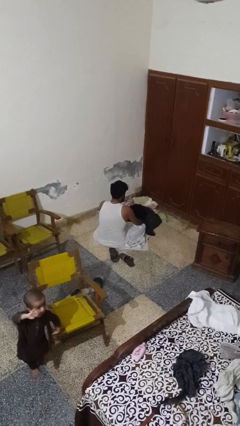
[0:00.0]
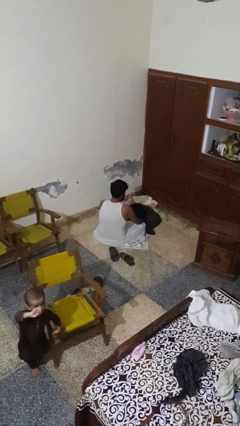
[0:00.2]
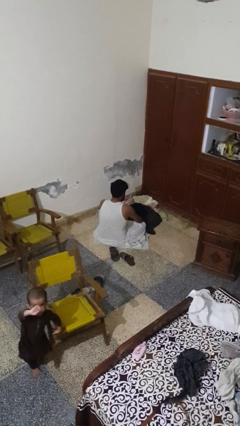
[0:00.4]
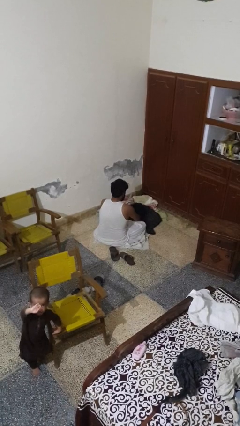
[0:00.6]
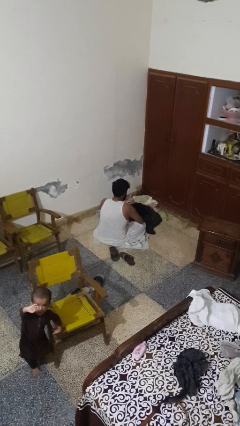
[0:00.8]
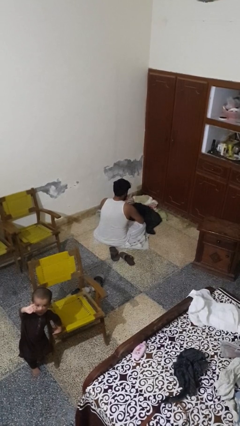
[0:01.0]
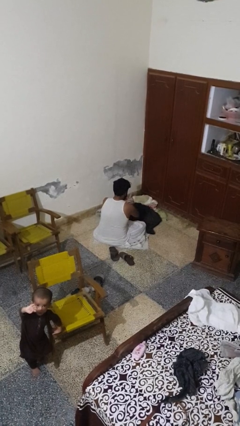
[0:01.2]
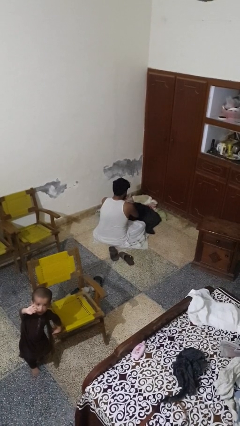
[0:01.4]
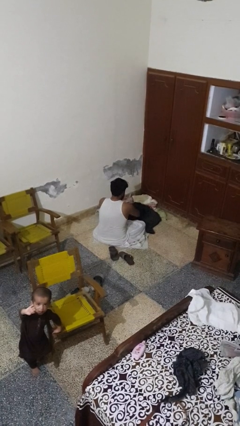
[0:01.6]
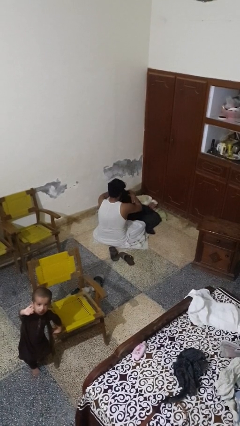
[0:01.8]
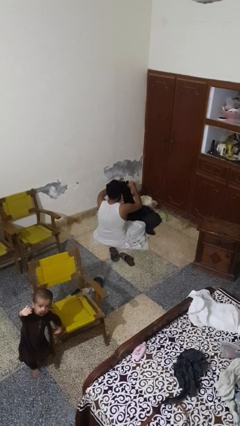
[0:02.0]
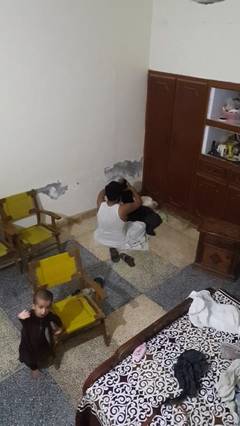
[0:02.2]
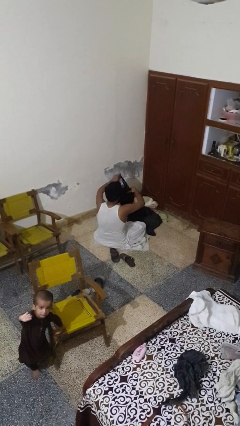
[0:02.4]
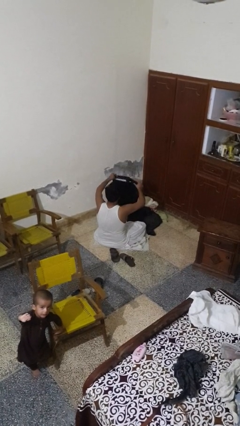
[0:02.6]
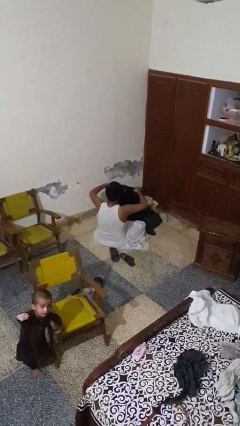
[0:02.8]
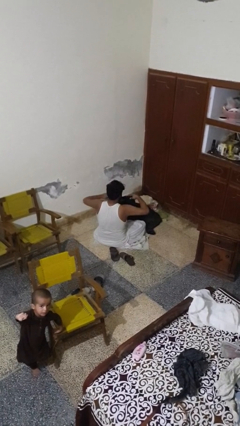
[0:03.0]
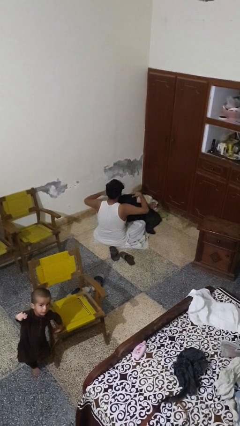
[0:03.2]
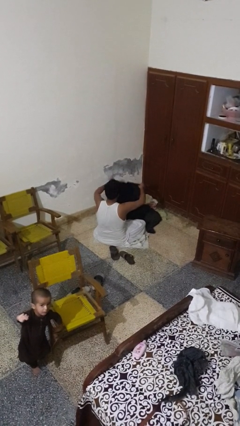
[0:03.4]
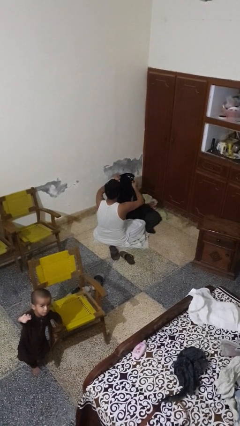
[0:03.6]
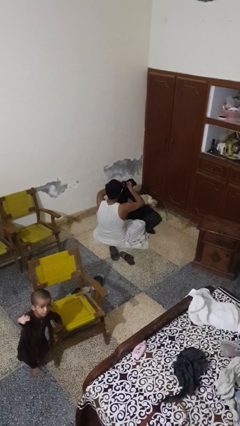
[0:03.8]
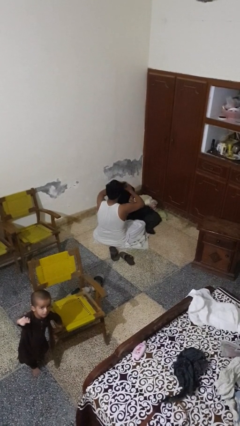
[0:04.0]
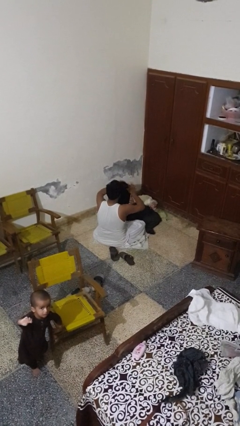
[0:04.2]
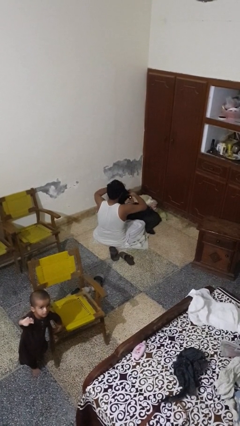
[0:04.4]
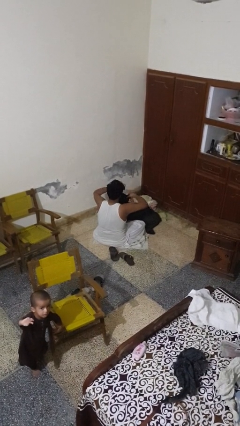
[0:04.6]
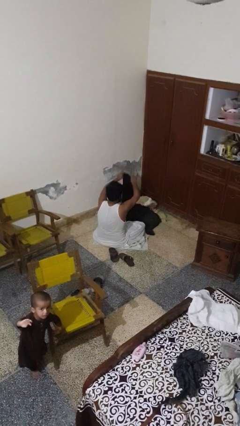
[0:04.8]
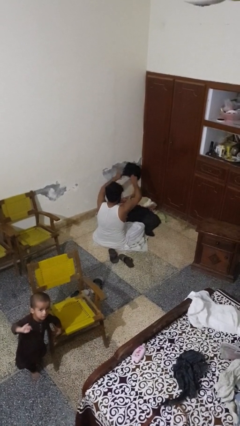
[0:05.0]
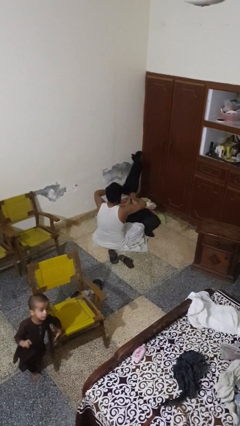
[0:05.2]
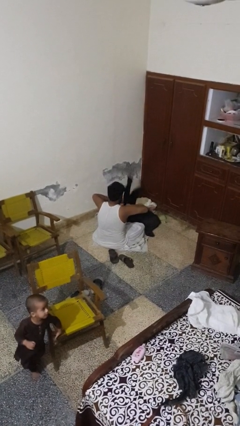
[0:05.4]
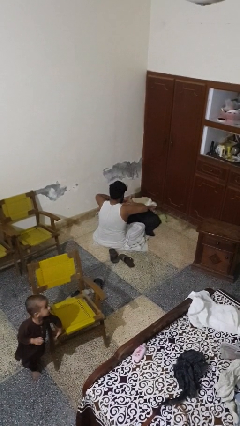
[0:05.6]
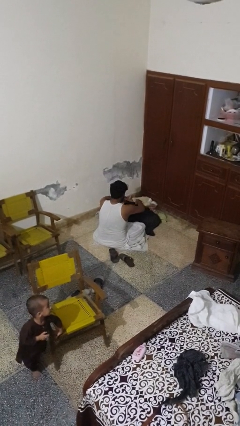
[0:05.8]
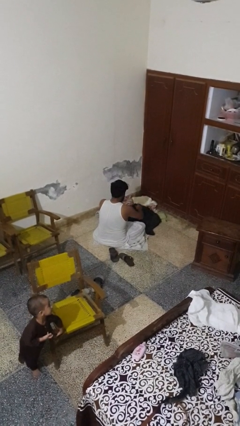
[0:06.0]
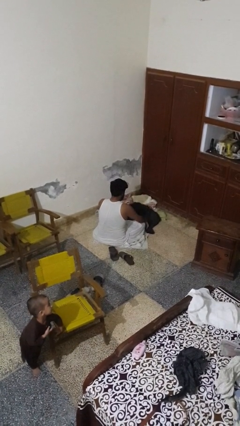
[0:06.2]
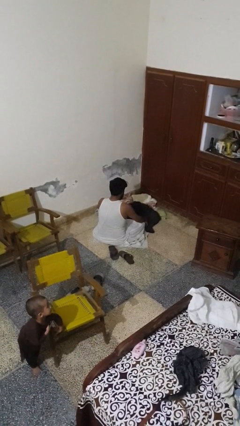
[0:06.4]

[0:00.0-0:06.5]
person folds pants

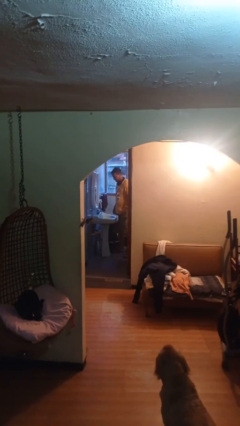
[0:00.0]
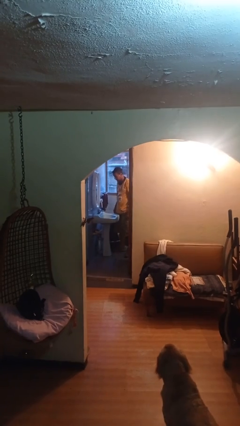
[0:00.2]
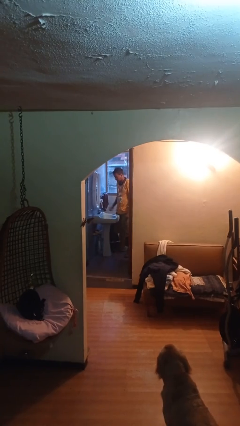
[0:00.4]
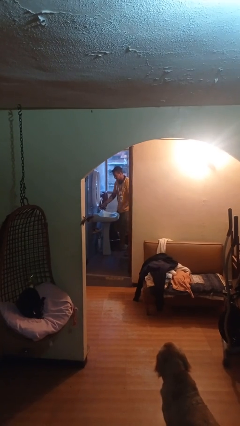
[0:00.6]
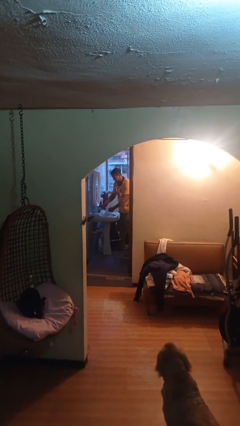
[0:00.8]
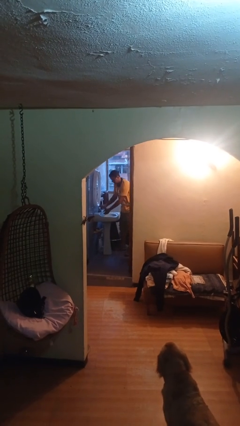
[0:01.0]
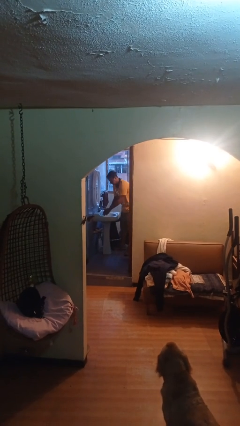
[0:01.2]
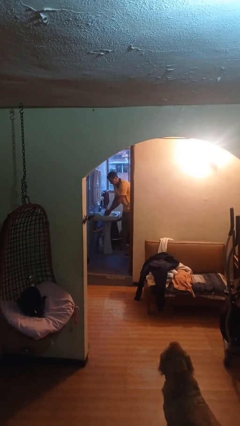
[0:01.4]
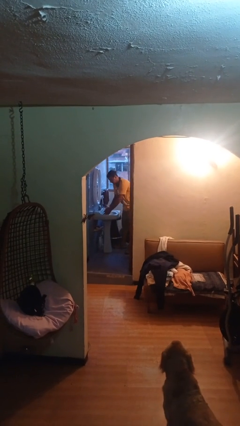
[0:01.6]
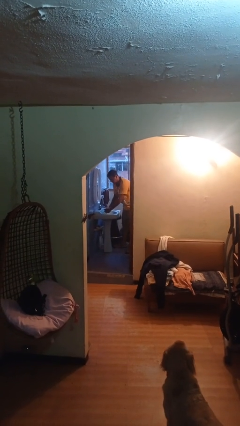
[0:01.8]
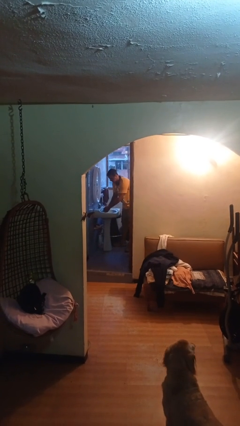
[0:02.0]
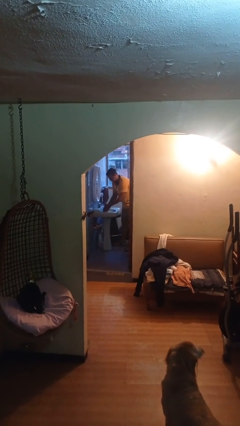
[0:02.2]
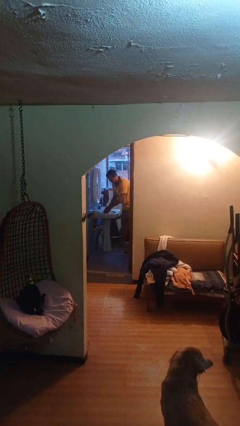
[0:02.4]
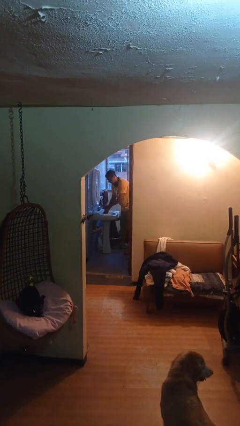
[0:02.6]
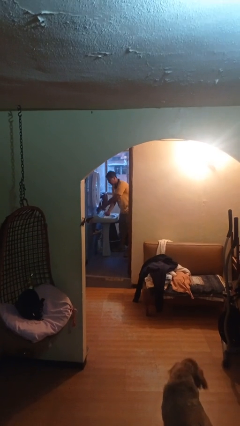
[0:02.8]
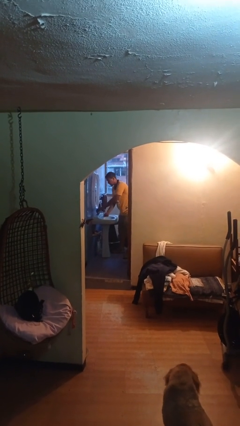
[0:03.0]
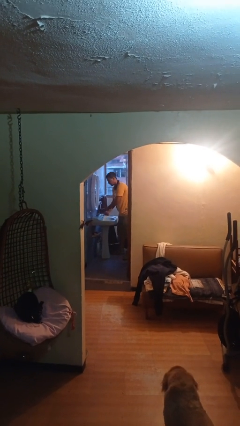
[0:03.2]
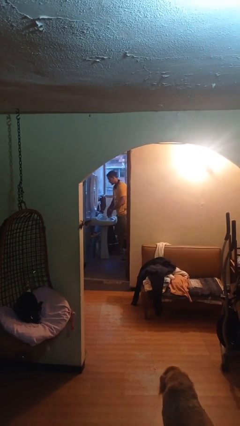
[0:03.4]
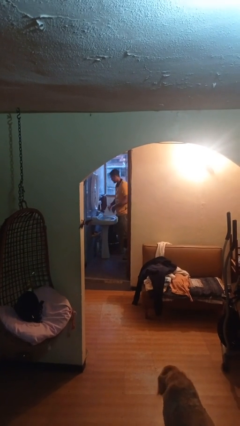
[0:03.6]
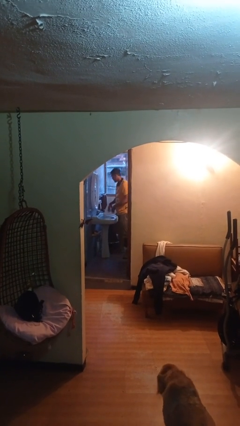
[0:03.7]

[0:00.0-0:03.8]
person washes hands

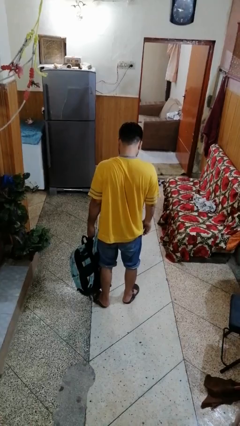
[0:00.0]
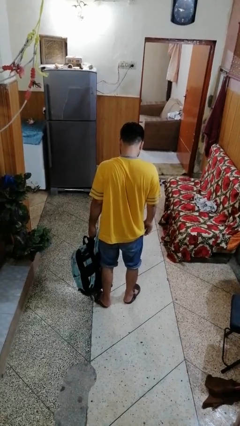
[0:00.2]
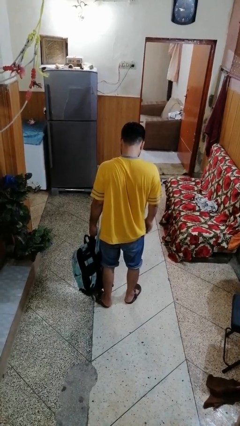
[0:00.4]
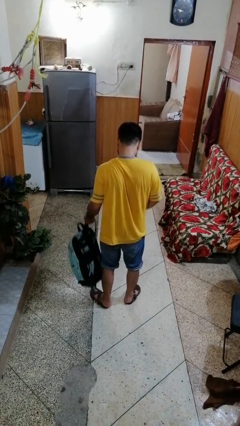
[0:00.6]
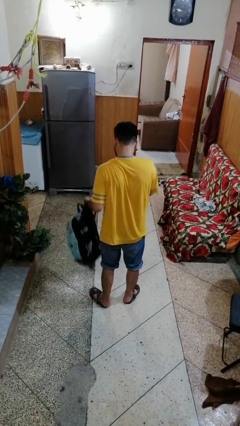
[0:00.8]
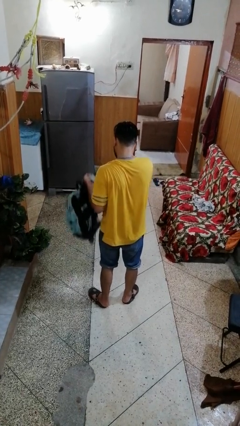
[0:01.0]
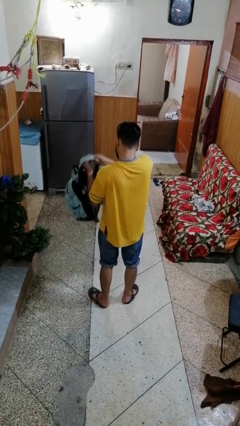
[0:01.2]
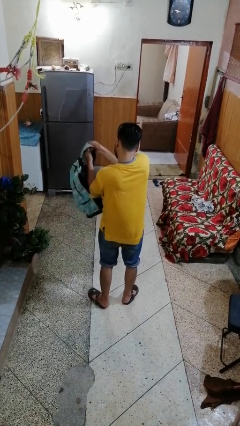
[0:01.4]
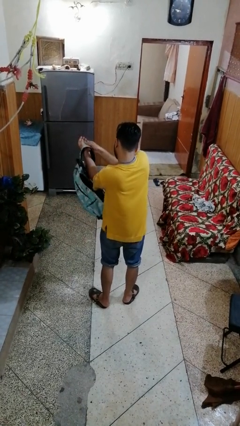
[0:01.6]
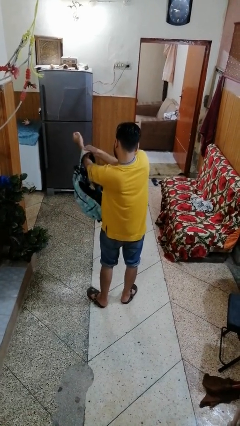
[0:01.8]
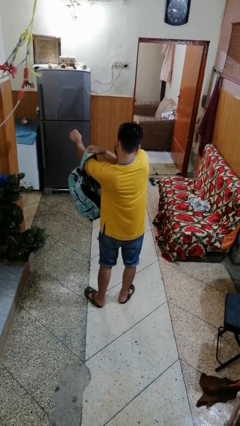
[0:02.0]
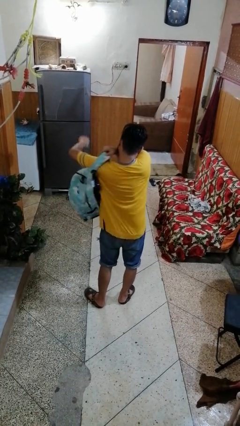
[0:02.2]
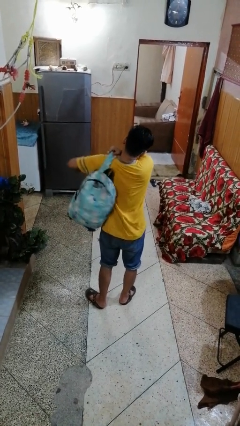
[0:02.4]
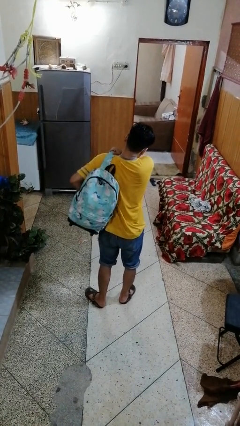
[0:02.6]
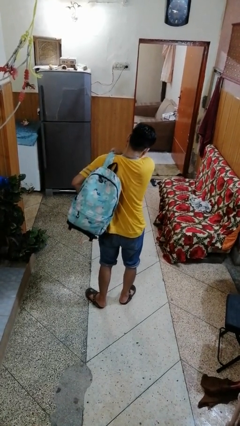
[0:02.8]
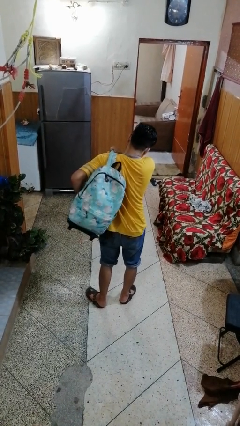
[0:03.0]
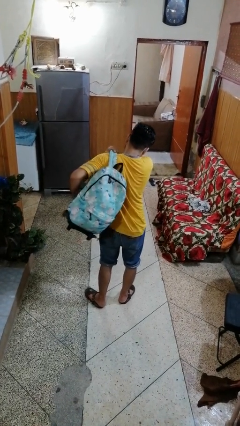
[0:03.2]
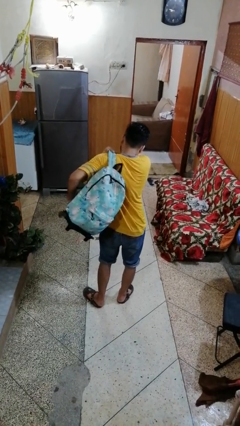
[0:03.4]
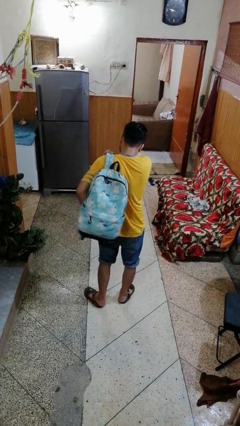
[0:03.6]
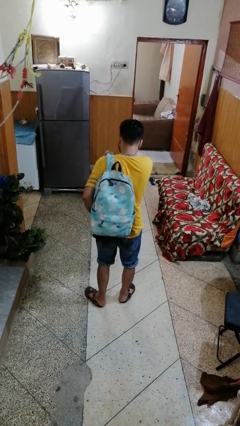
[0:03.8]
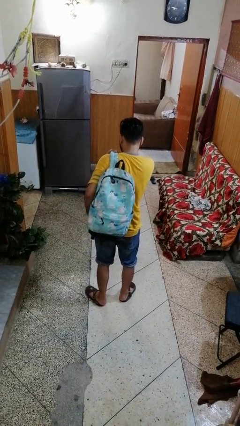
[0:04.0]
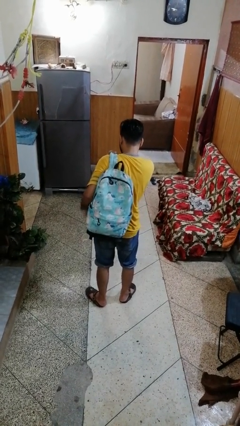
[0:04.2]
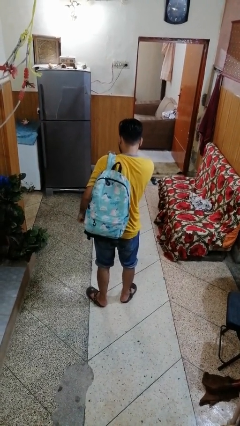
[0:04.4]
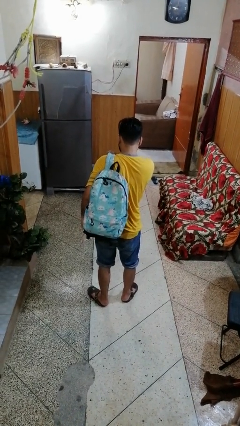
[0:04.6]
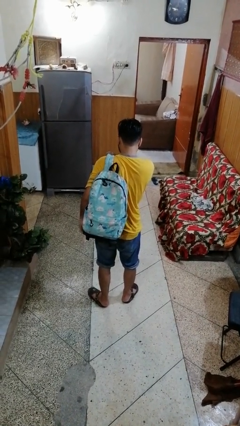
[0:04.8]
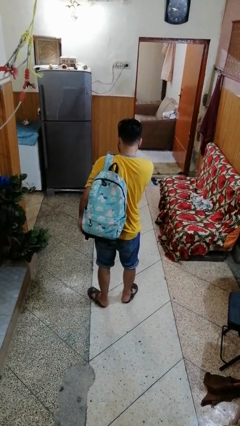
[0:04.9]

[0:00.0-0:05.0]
person puts on backpack

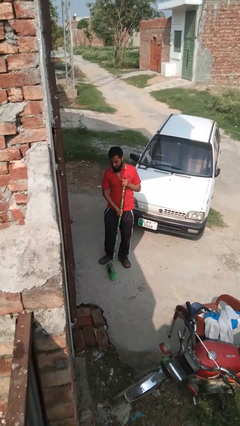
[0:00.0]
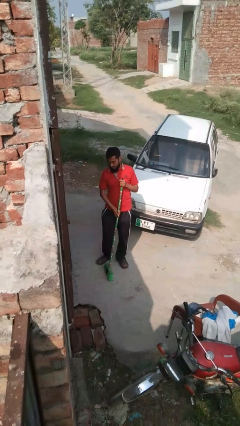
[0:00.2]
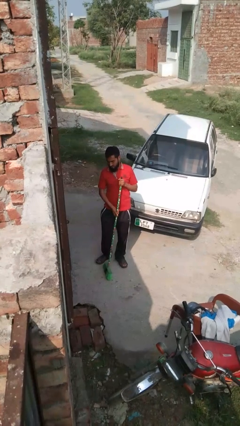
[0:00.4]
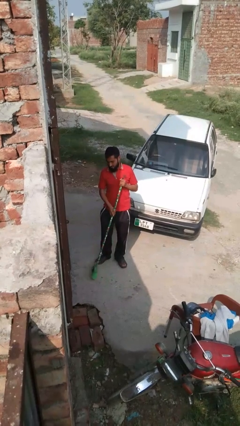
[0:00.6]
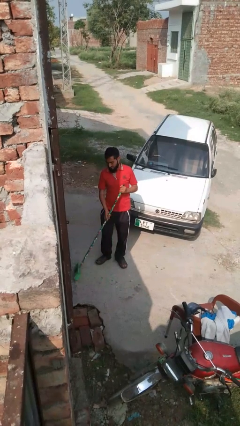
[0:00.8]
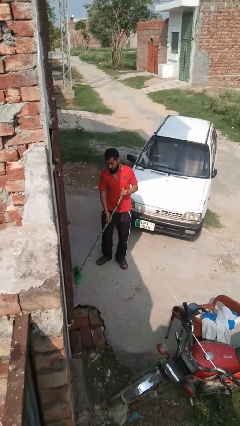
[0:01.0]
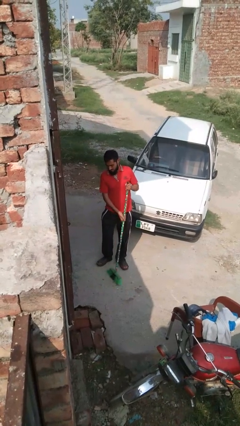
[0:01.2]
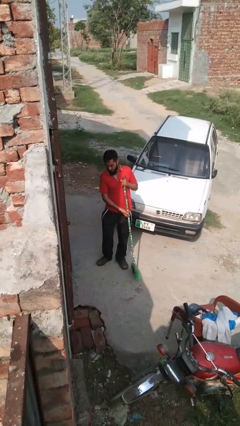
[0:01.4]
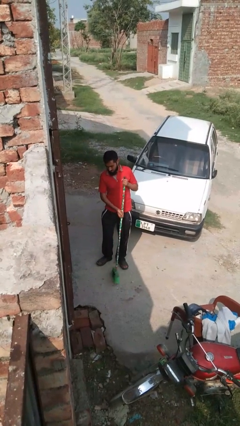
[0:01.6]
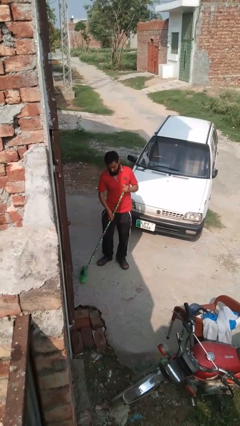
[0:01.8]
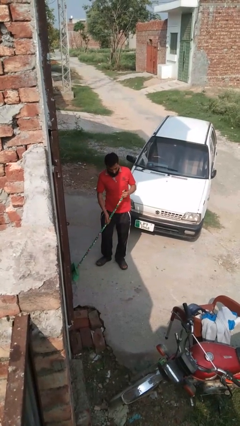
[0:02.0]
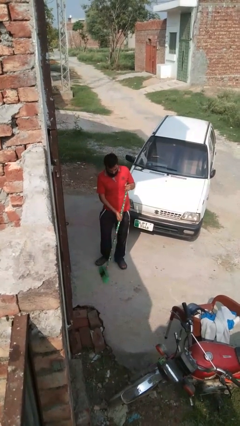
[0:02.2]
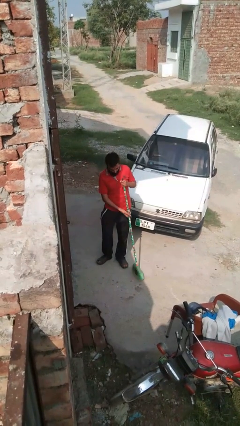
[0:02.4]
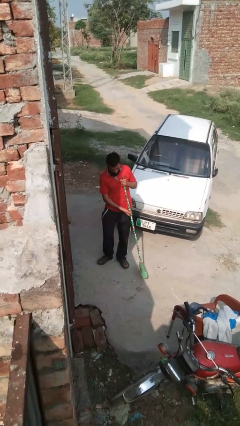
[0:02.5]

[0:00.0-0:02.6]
person sweeps floor
